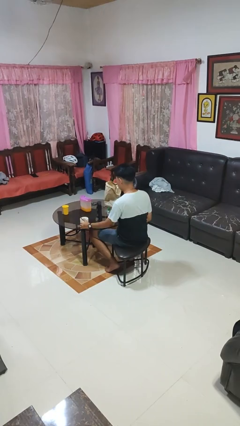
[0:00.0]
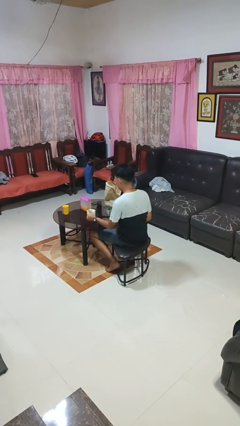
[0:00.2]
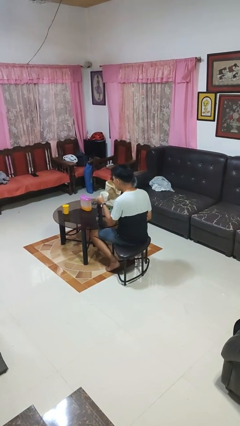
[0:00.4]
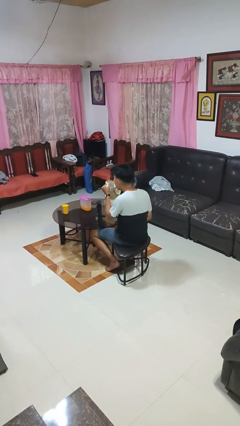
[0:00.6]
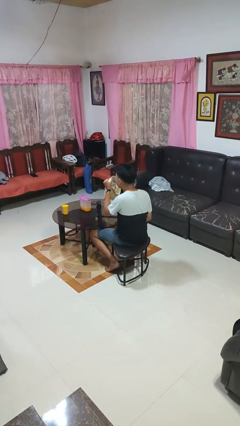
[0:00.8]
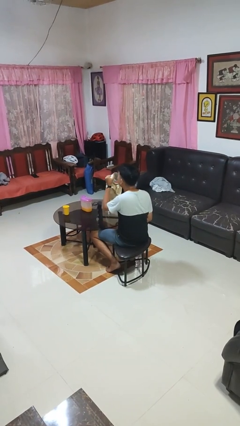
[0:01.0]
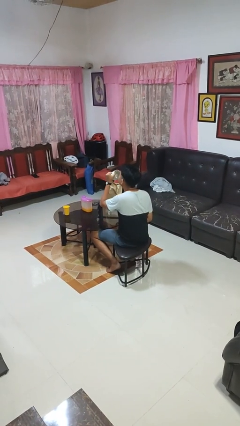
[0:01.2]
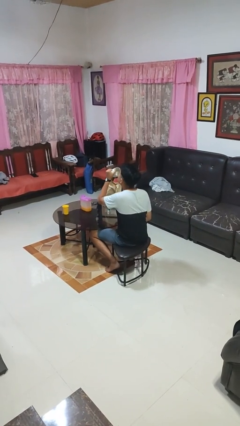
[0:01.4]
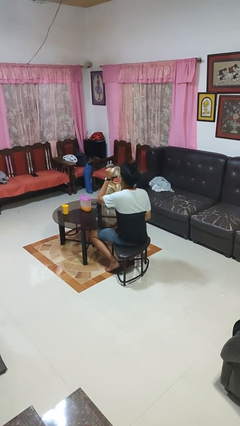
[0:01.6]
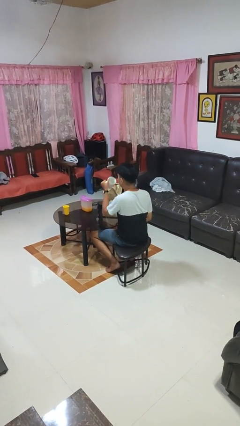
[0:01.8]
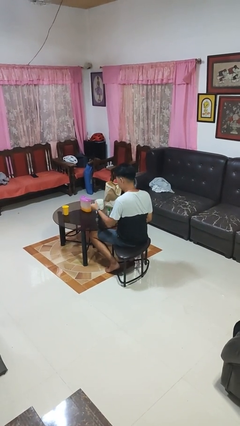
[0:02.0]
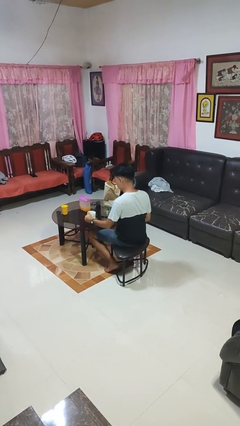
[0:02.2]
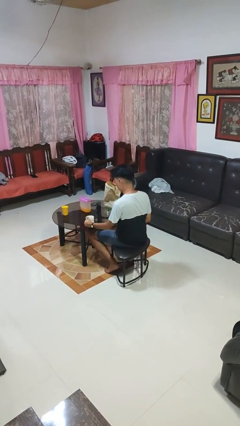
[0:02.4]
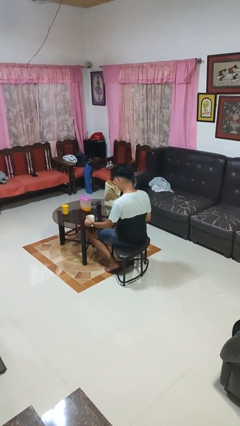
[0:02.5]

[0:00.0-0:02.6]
person drinks from mug

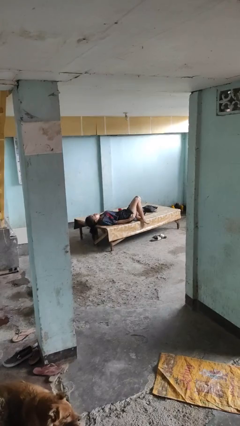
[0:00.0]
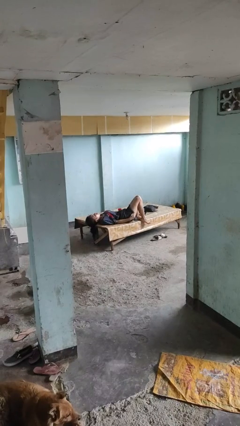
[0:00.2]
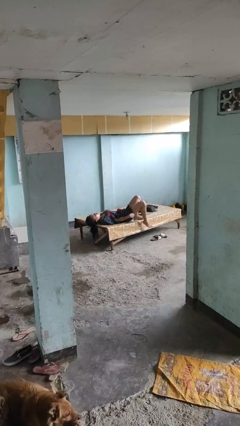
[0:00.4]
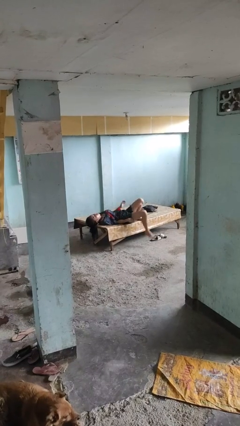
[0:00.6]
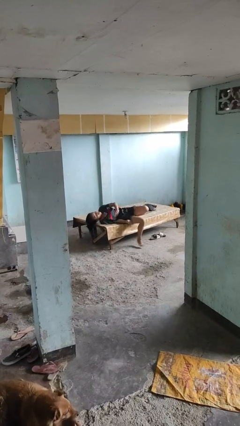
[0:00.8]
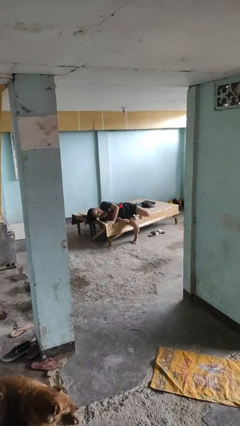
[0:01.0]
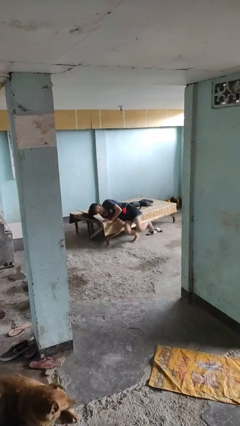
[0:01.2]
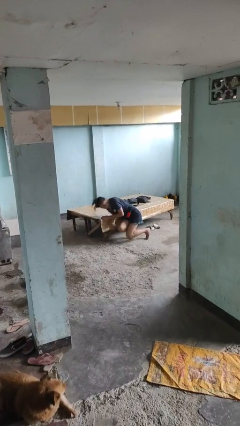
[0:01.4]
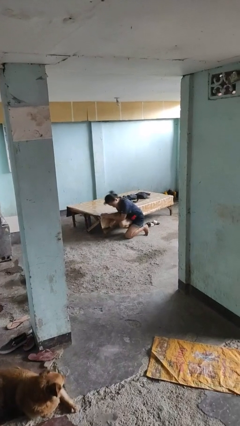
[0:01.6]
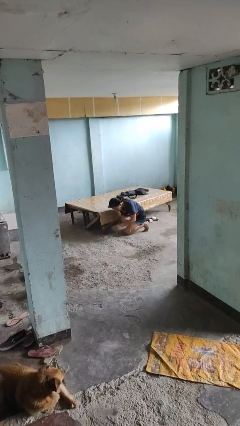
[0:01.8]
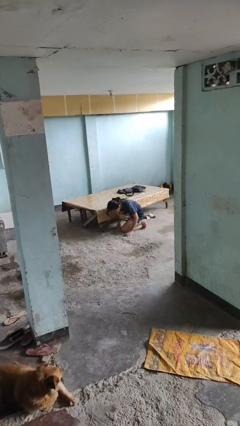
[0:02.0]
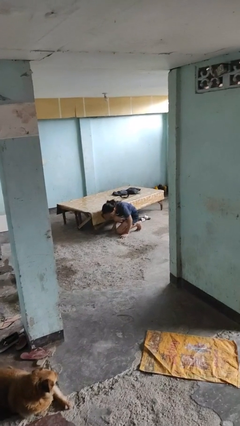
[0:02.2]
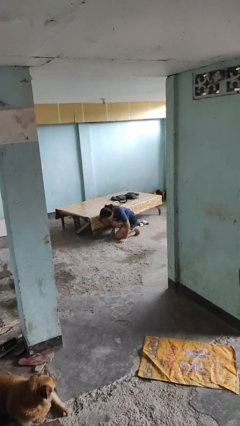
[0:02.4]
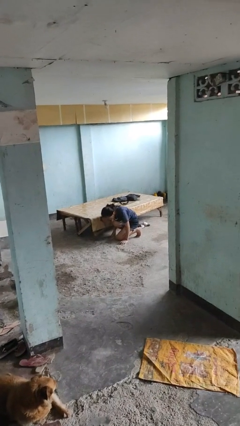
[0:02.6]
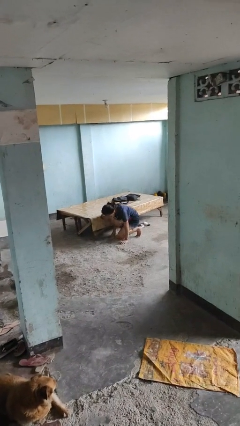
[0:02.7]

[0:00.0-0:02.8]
person falls from bed

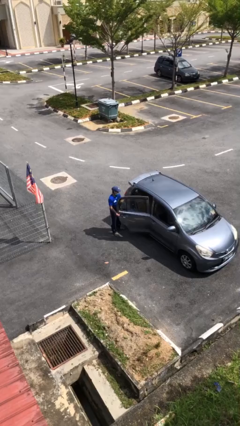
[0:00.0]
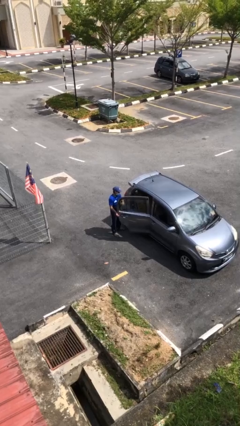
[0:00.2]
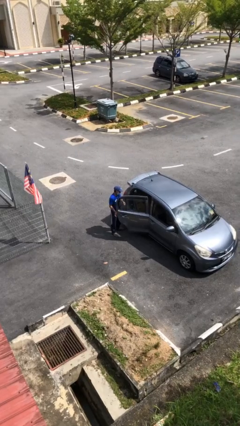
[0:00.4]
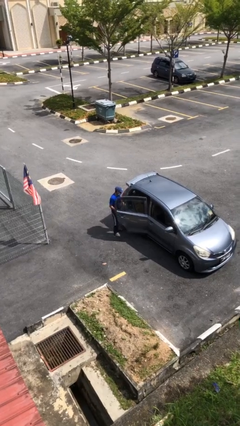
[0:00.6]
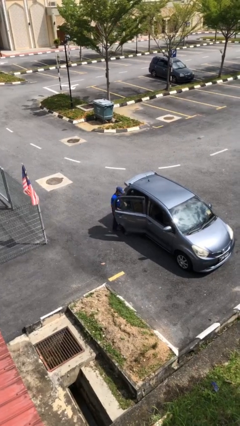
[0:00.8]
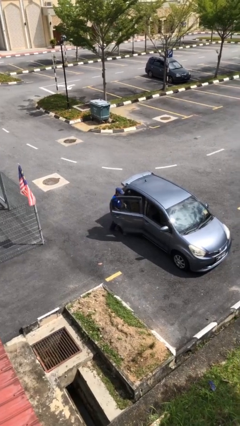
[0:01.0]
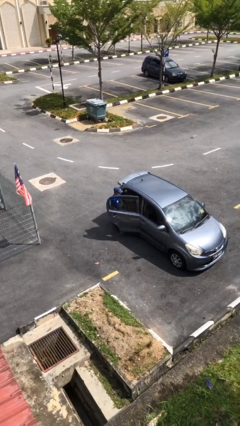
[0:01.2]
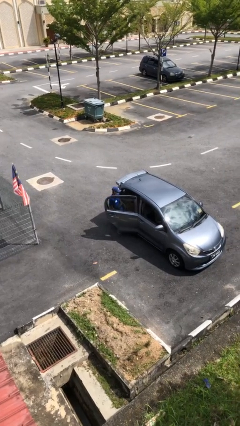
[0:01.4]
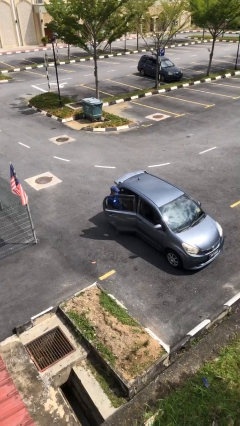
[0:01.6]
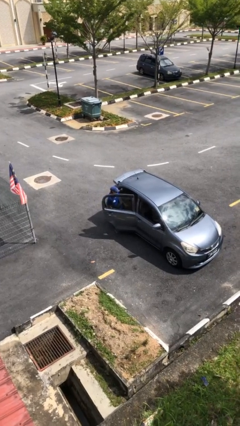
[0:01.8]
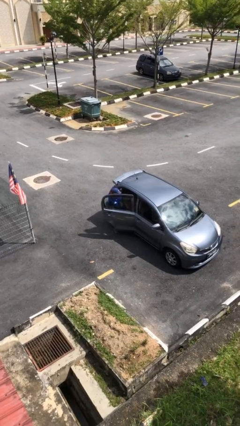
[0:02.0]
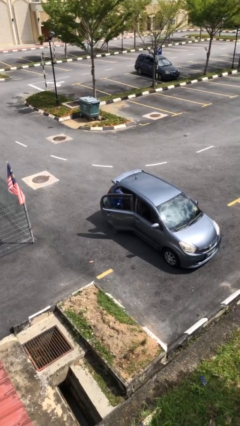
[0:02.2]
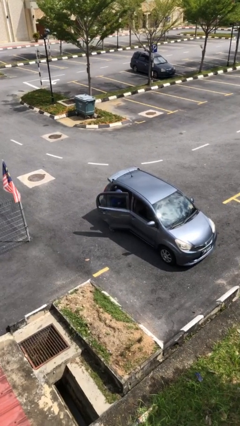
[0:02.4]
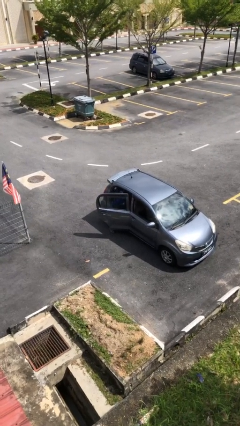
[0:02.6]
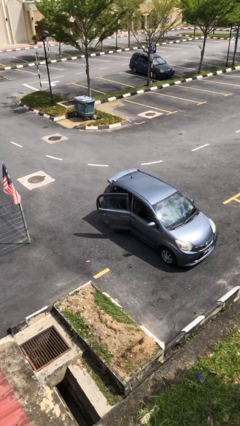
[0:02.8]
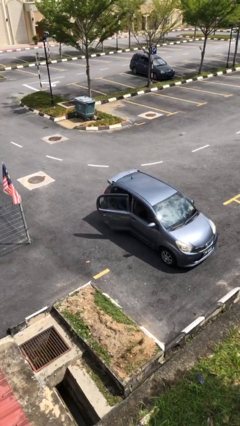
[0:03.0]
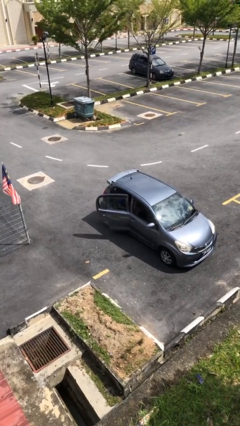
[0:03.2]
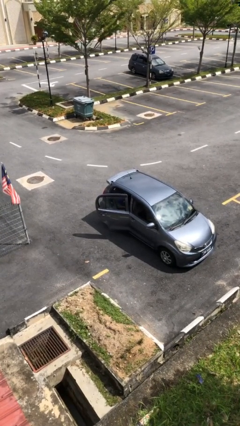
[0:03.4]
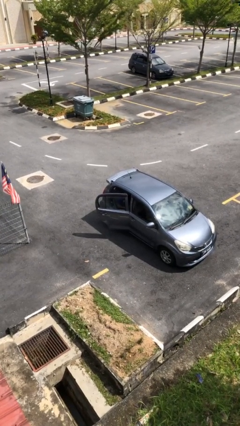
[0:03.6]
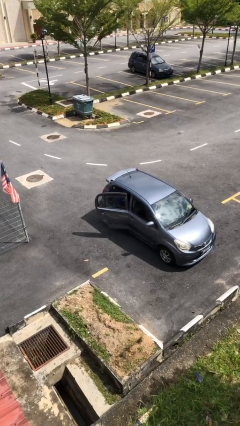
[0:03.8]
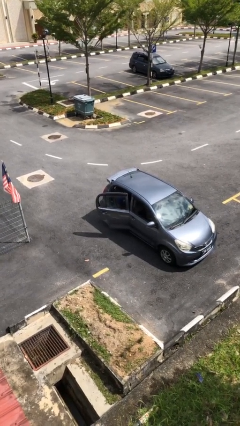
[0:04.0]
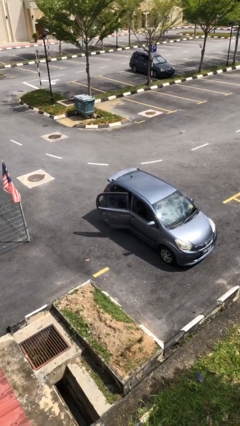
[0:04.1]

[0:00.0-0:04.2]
person enters car

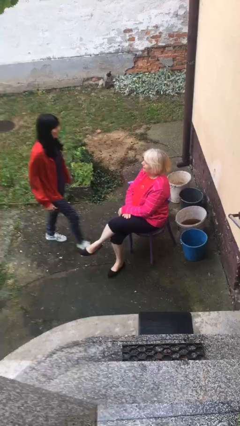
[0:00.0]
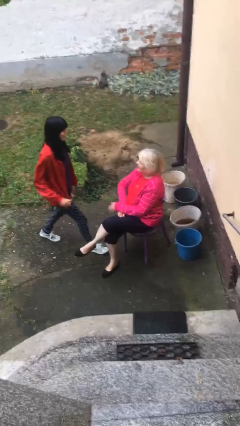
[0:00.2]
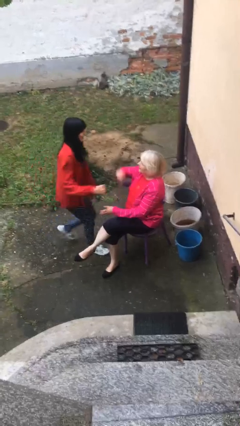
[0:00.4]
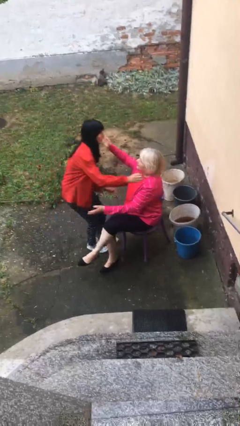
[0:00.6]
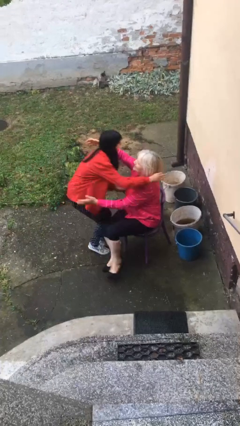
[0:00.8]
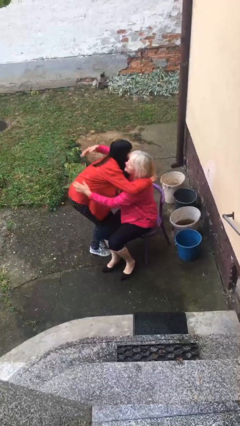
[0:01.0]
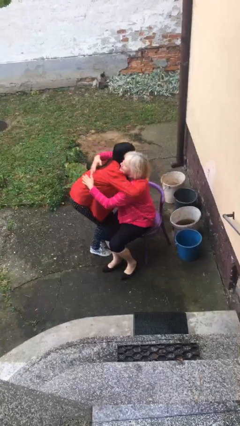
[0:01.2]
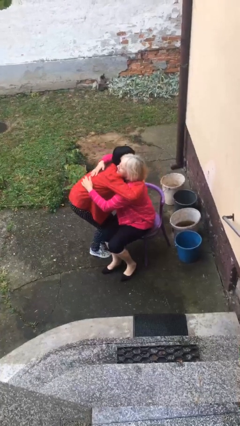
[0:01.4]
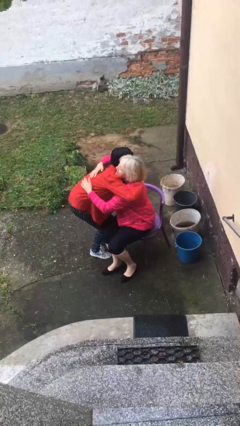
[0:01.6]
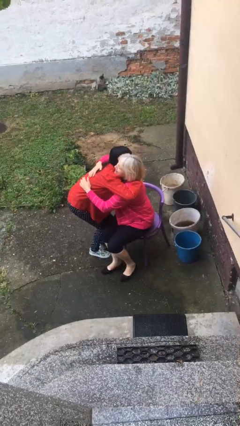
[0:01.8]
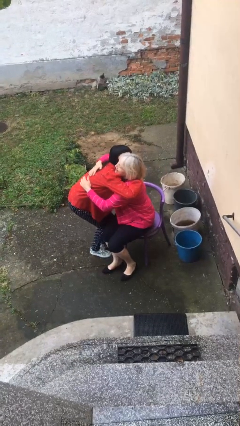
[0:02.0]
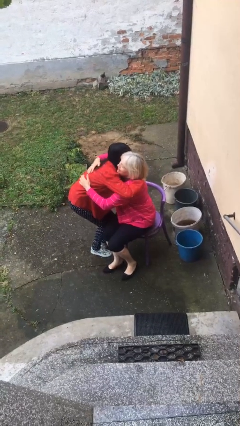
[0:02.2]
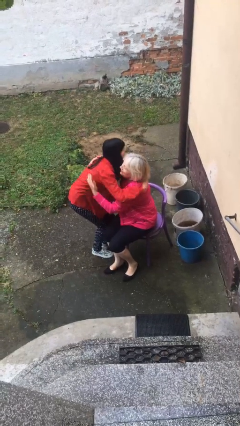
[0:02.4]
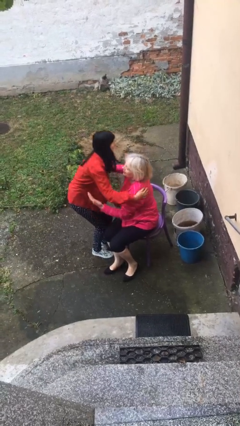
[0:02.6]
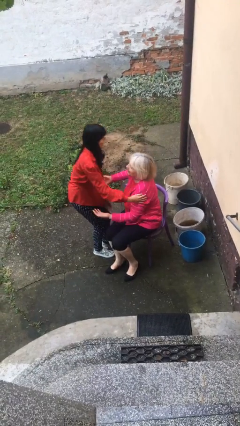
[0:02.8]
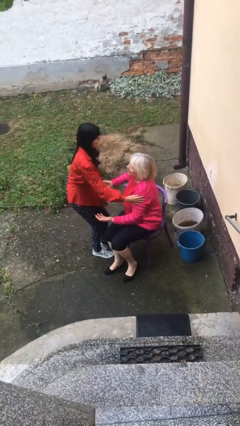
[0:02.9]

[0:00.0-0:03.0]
person embraces person

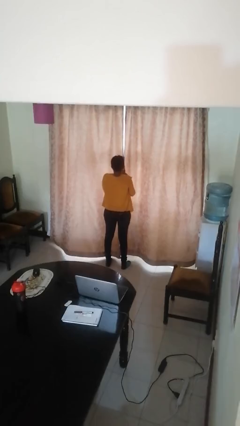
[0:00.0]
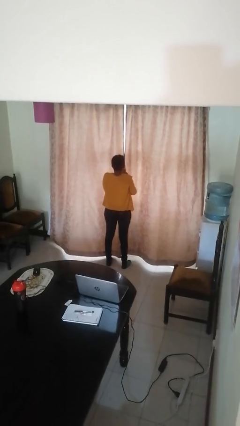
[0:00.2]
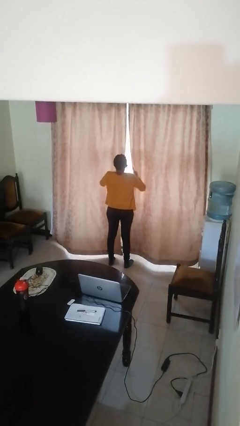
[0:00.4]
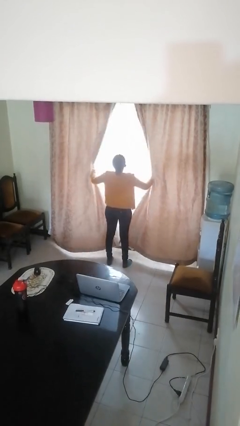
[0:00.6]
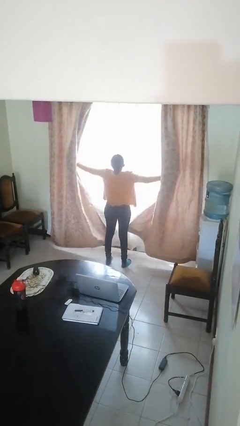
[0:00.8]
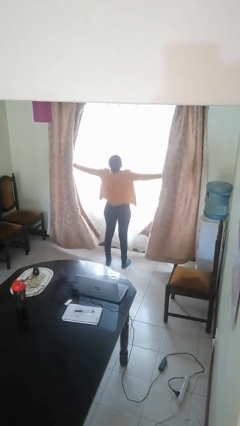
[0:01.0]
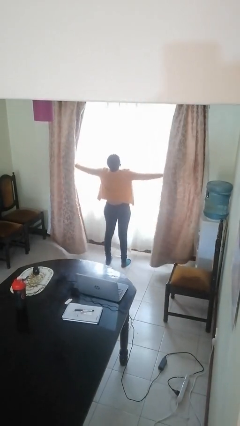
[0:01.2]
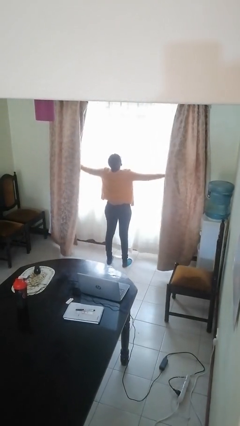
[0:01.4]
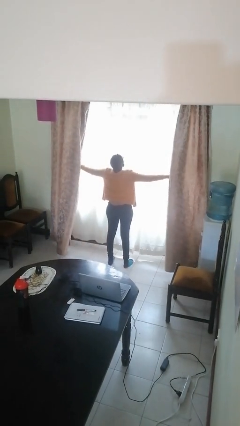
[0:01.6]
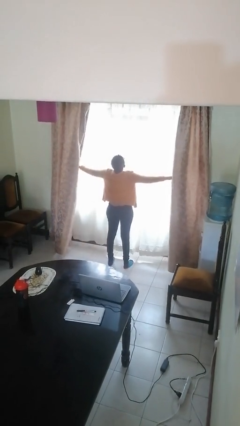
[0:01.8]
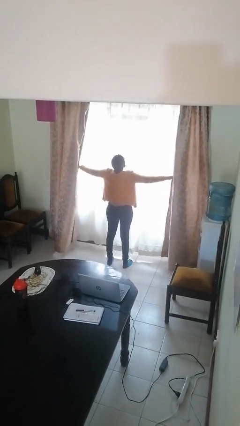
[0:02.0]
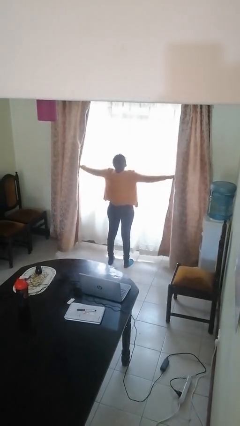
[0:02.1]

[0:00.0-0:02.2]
person opens curtains

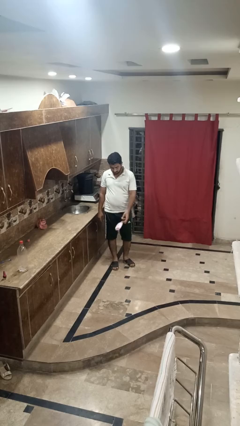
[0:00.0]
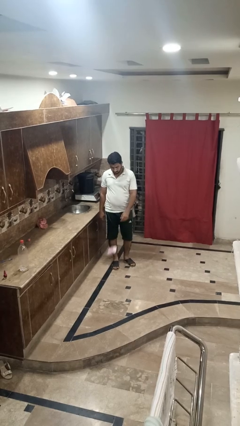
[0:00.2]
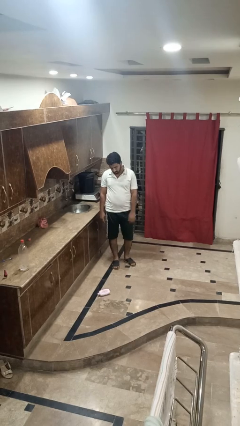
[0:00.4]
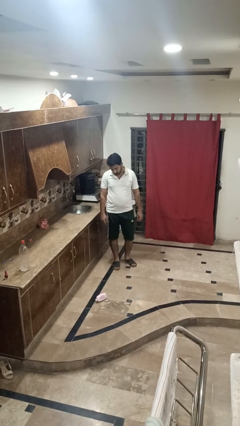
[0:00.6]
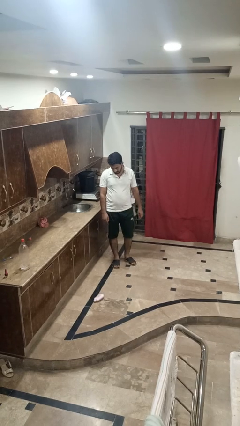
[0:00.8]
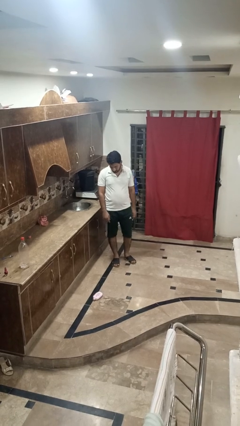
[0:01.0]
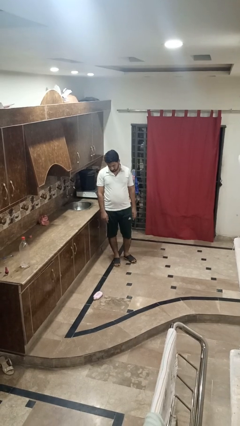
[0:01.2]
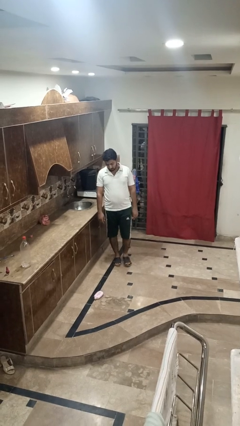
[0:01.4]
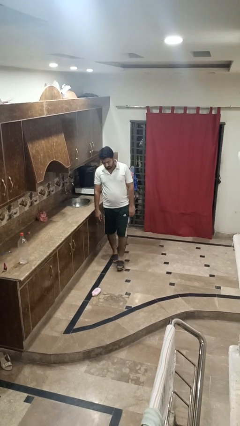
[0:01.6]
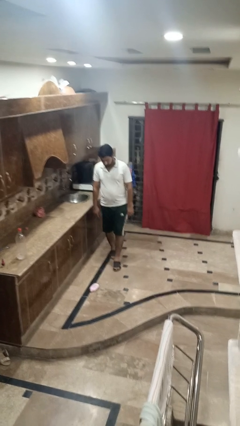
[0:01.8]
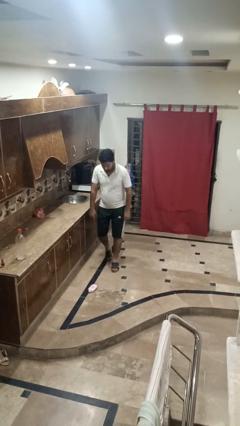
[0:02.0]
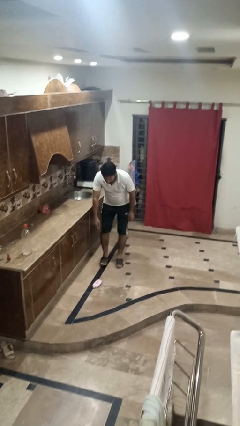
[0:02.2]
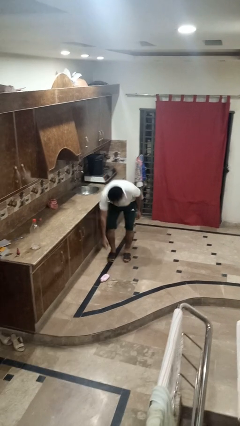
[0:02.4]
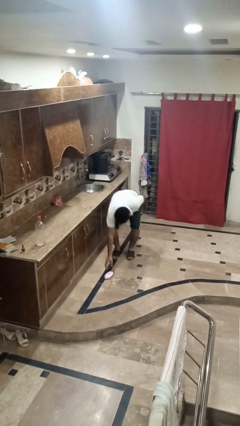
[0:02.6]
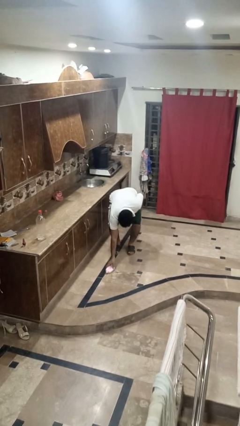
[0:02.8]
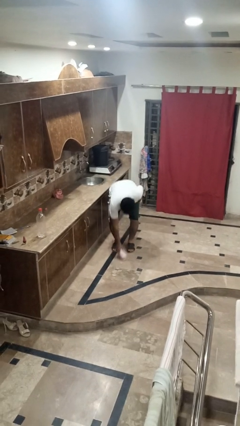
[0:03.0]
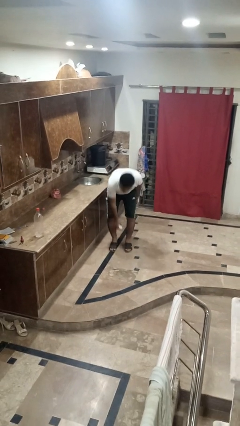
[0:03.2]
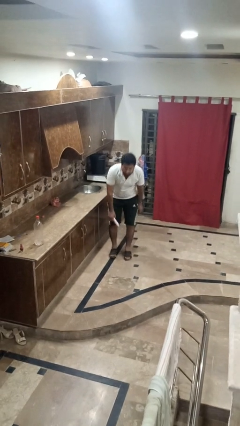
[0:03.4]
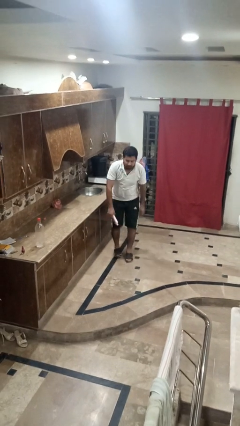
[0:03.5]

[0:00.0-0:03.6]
person throws object to ground
